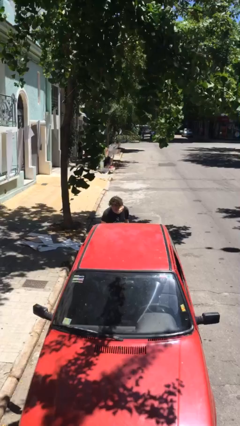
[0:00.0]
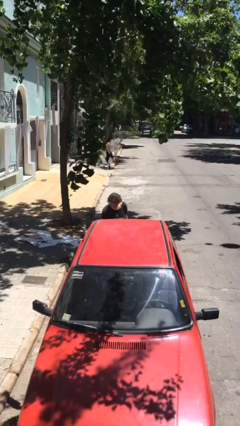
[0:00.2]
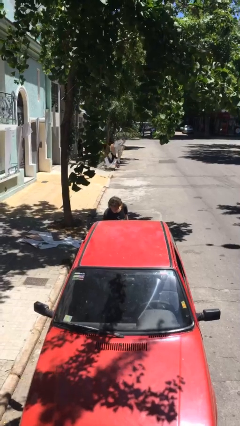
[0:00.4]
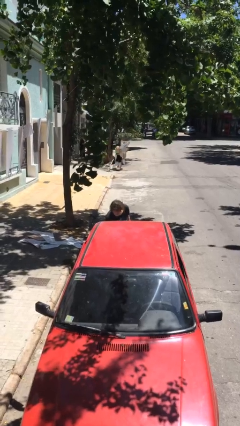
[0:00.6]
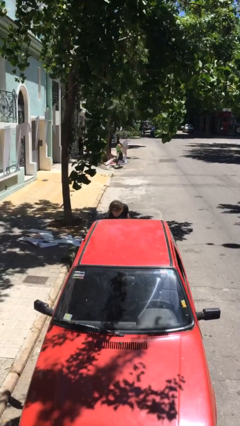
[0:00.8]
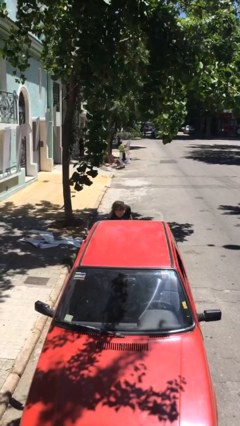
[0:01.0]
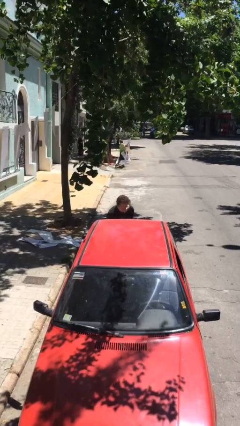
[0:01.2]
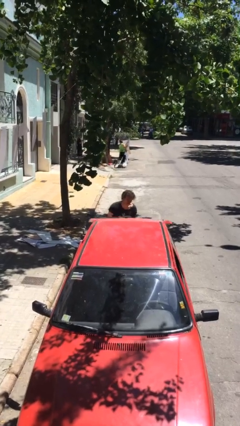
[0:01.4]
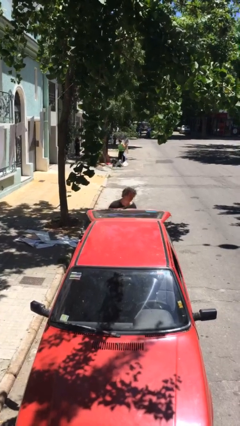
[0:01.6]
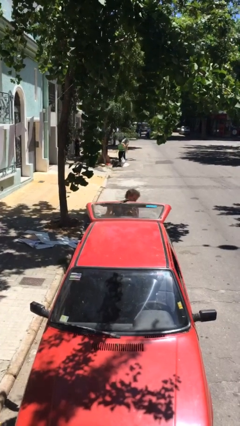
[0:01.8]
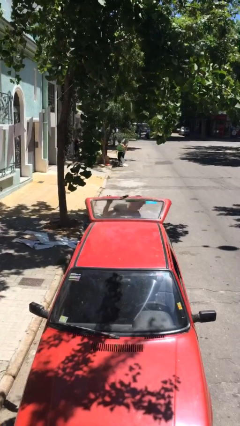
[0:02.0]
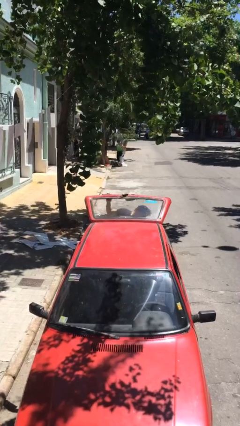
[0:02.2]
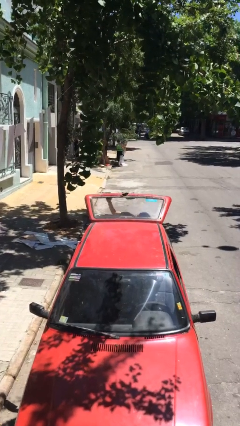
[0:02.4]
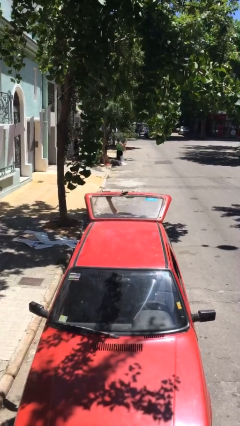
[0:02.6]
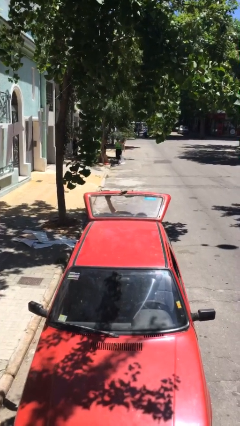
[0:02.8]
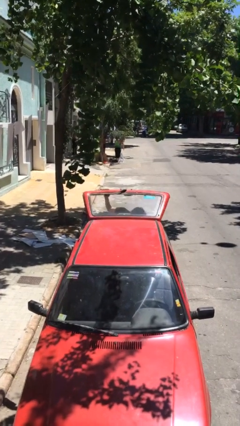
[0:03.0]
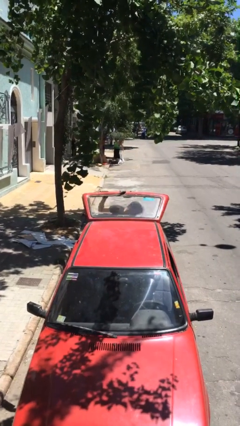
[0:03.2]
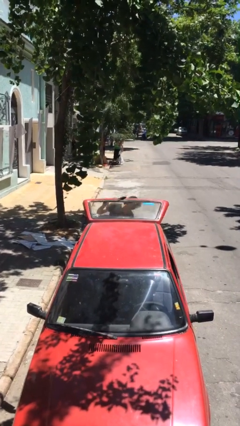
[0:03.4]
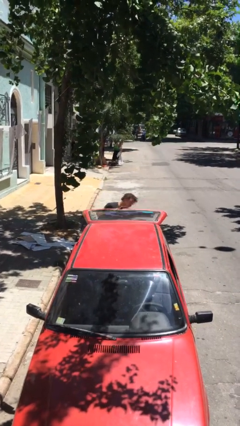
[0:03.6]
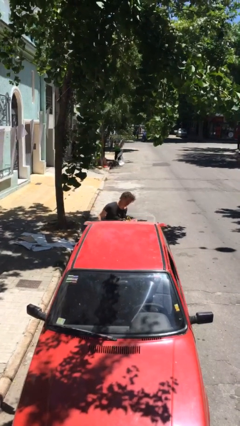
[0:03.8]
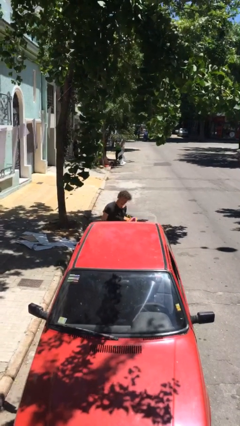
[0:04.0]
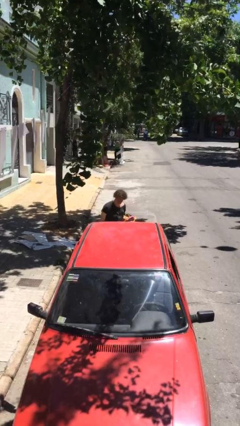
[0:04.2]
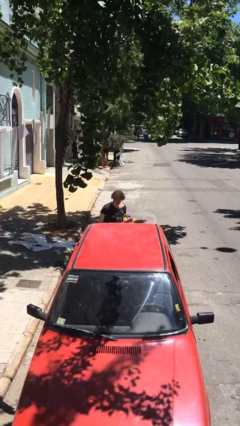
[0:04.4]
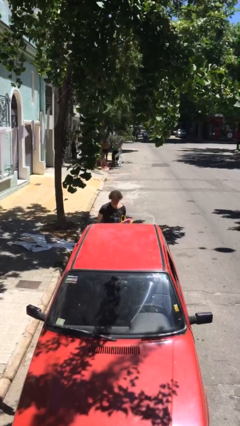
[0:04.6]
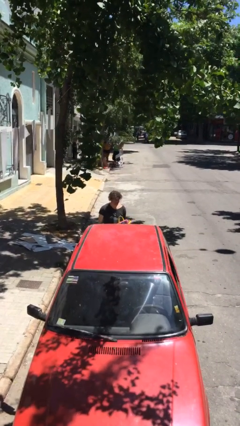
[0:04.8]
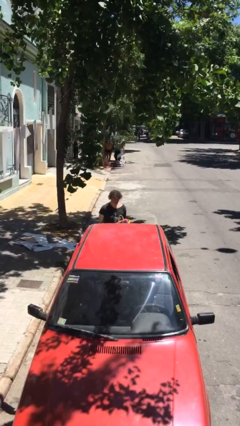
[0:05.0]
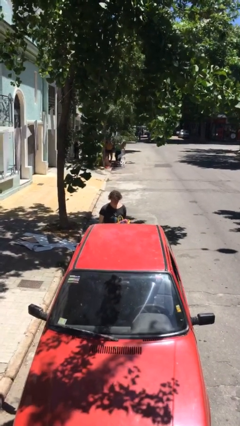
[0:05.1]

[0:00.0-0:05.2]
person unloads car

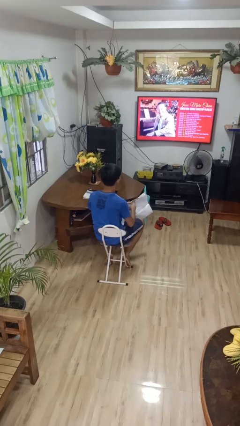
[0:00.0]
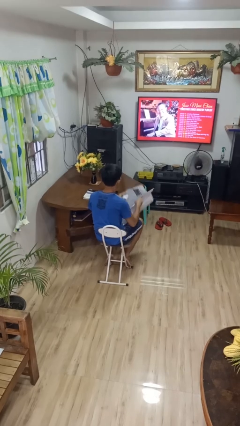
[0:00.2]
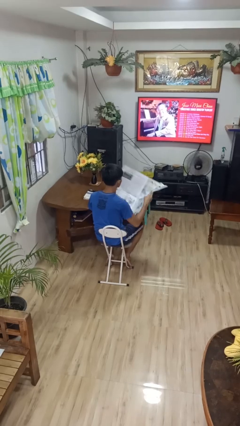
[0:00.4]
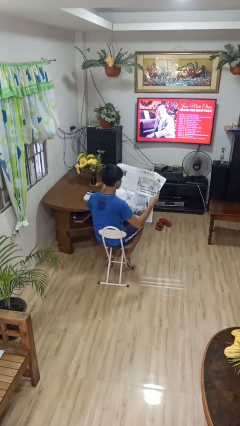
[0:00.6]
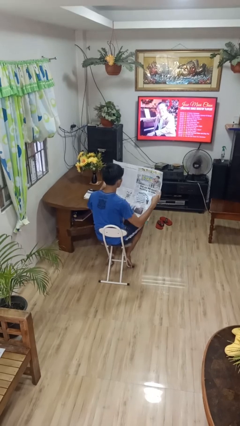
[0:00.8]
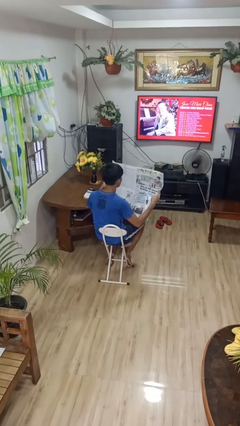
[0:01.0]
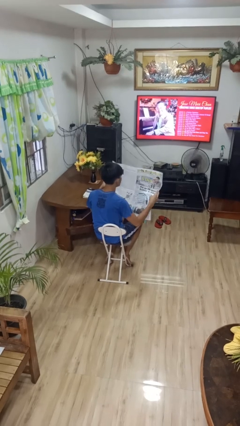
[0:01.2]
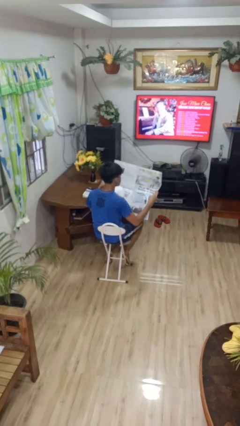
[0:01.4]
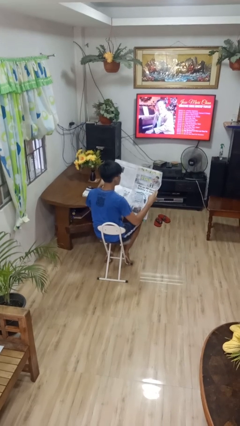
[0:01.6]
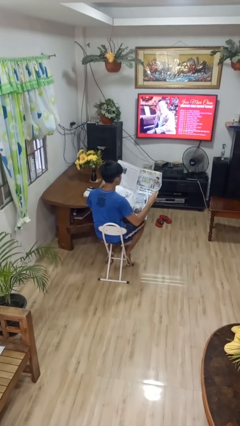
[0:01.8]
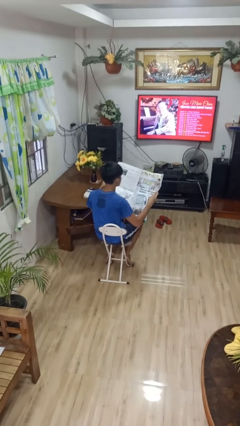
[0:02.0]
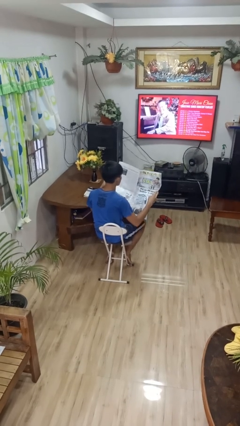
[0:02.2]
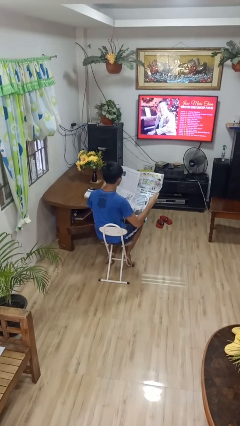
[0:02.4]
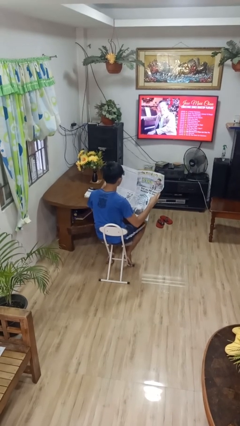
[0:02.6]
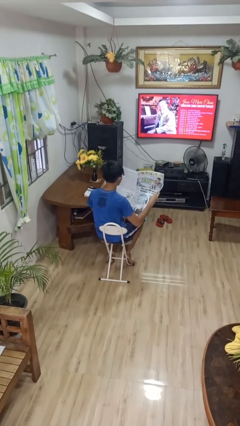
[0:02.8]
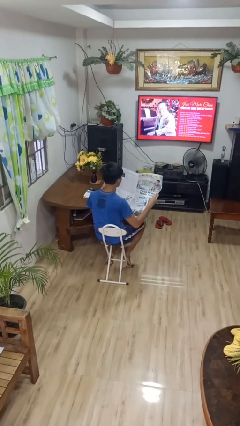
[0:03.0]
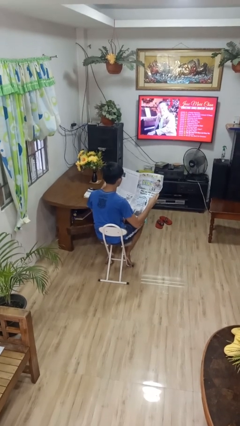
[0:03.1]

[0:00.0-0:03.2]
person reads newspaper

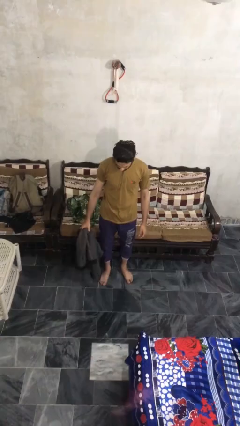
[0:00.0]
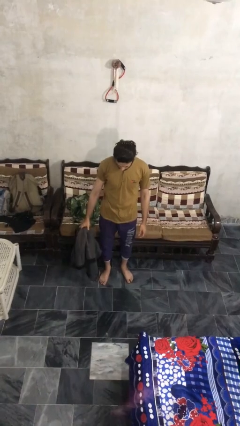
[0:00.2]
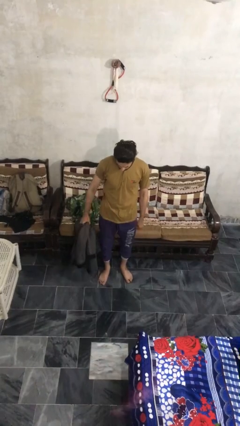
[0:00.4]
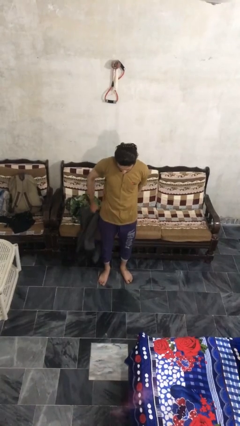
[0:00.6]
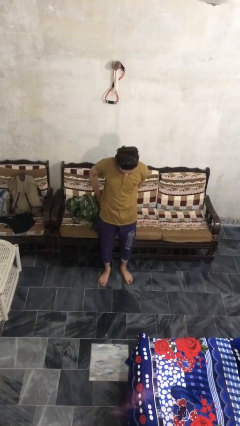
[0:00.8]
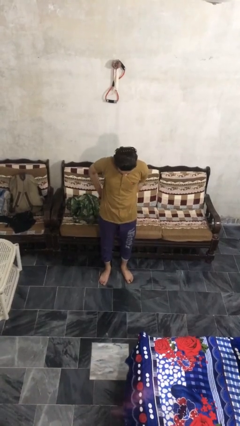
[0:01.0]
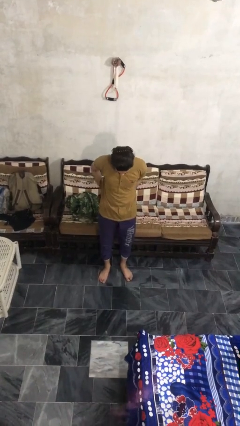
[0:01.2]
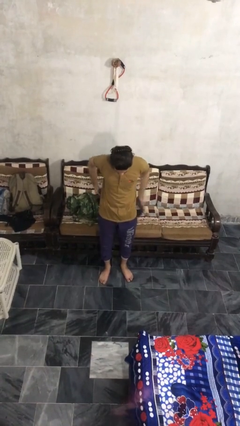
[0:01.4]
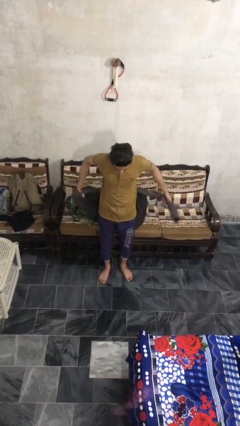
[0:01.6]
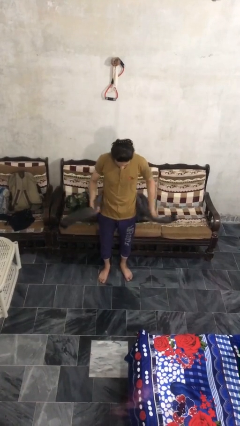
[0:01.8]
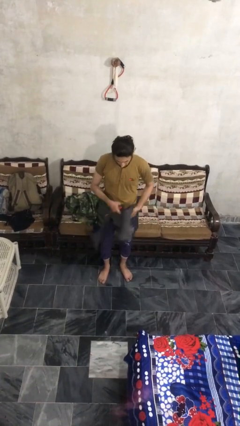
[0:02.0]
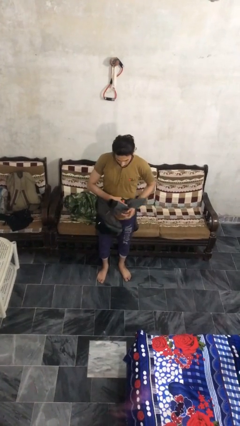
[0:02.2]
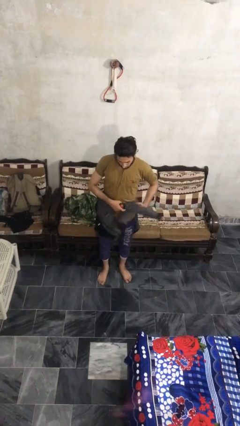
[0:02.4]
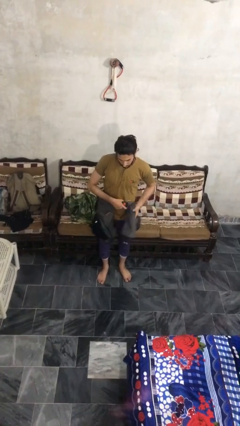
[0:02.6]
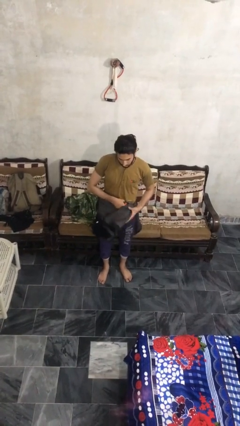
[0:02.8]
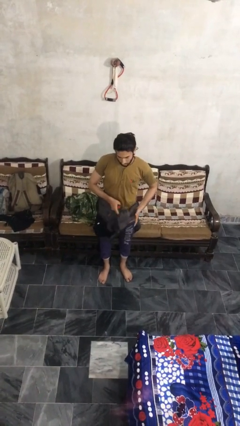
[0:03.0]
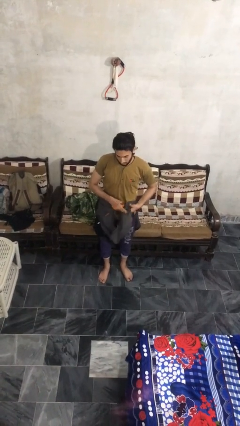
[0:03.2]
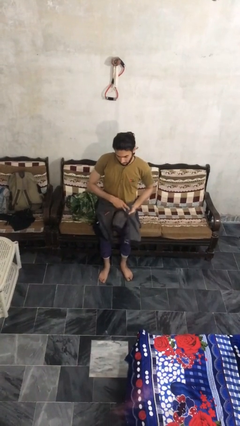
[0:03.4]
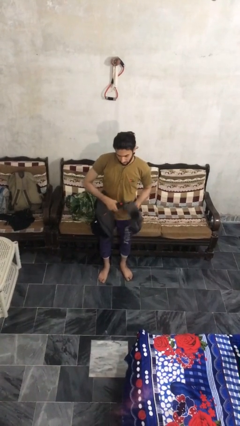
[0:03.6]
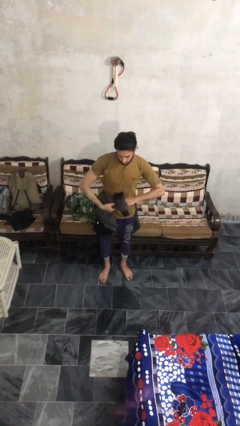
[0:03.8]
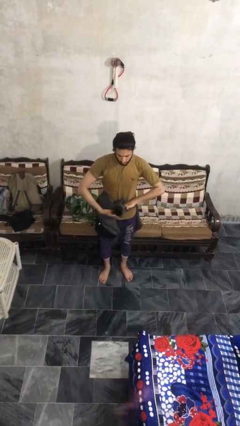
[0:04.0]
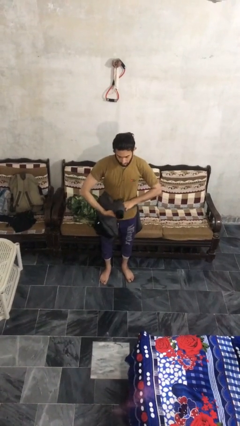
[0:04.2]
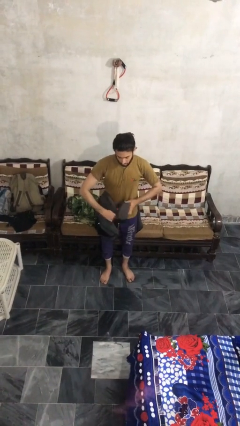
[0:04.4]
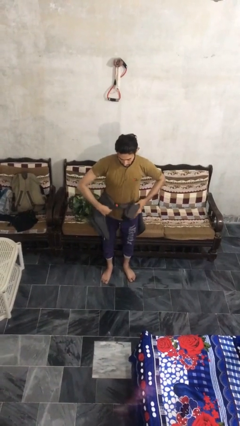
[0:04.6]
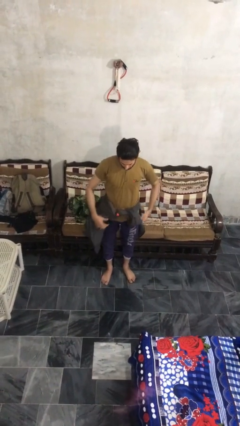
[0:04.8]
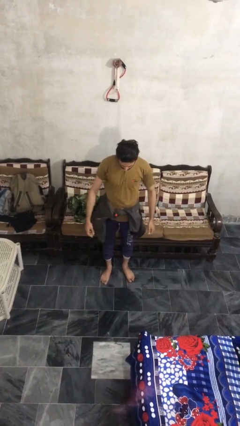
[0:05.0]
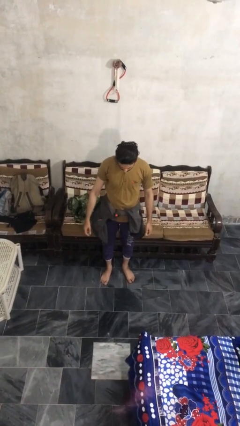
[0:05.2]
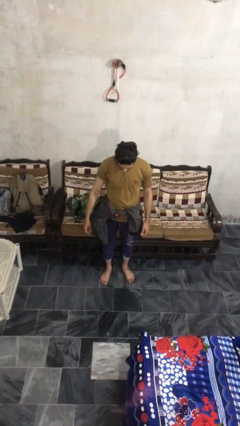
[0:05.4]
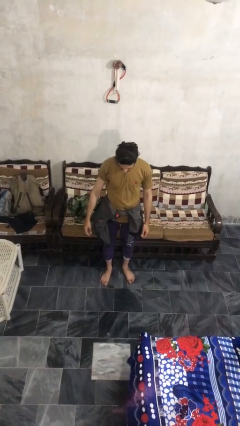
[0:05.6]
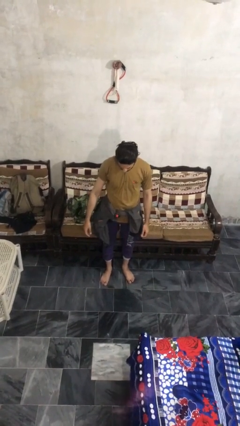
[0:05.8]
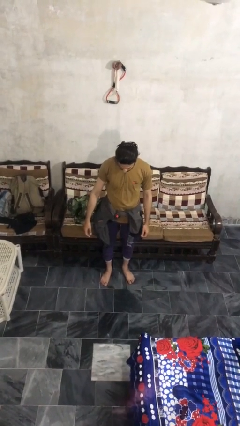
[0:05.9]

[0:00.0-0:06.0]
person ties jacket around waist

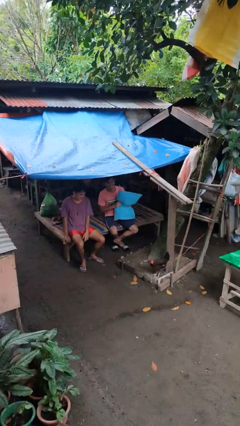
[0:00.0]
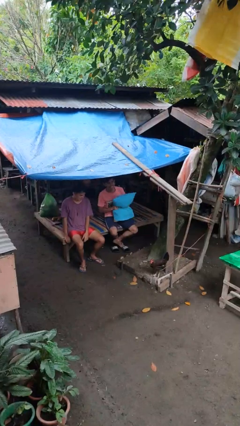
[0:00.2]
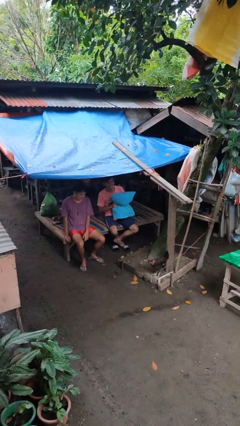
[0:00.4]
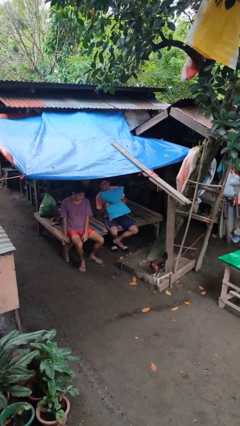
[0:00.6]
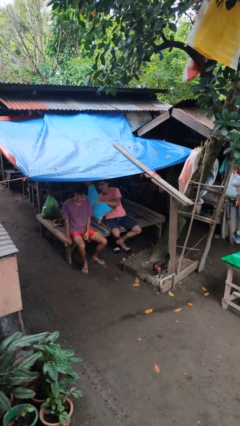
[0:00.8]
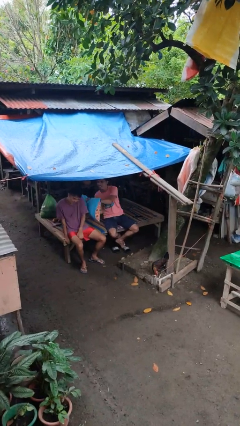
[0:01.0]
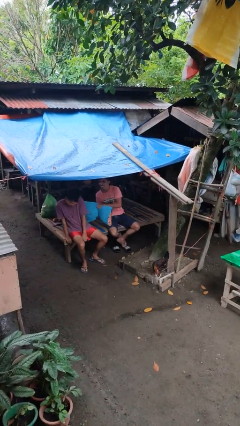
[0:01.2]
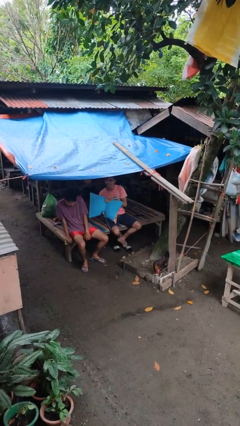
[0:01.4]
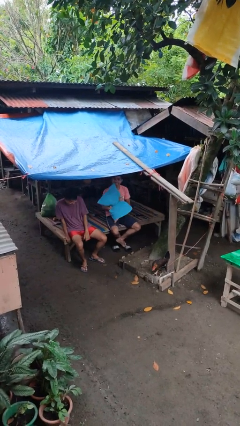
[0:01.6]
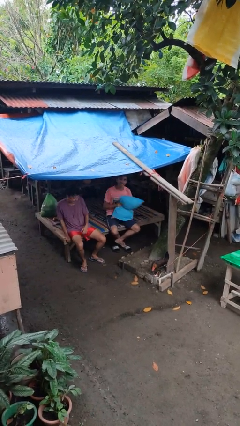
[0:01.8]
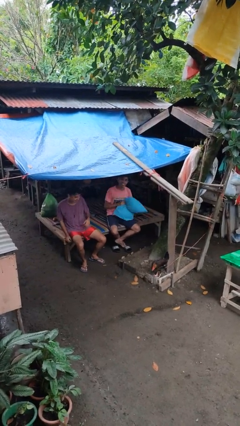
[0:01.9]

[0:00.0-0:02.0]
person hits person with pillow

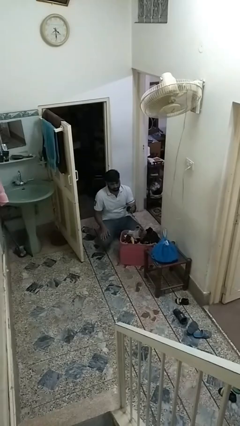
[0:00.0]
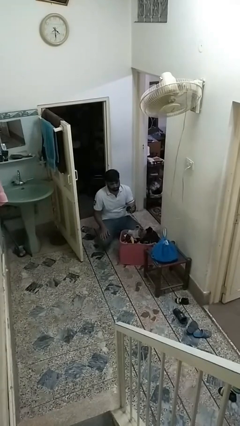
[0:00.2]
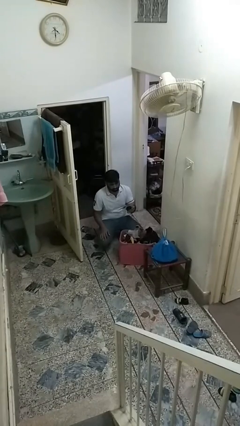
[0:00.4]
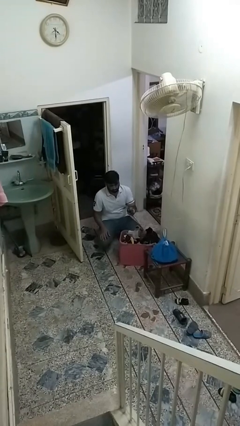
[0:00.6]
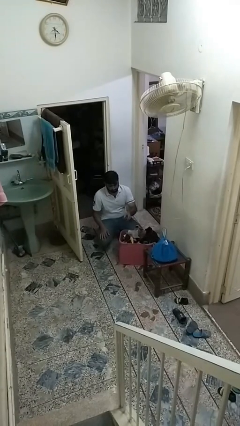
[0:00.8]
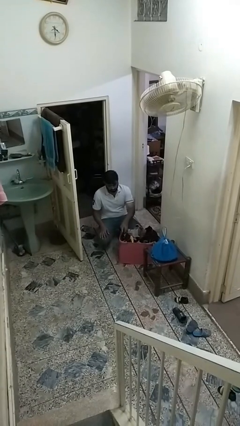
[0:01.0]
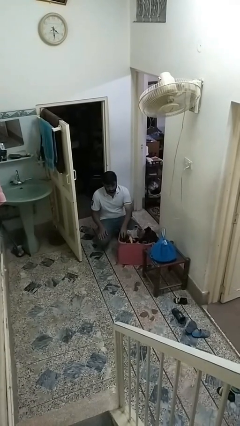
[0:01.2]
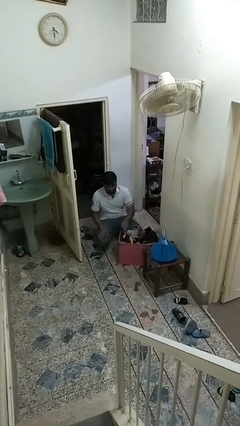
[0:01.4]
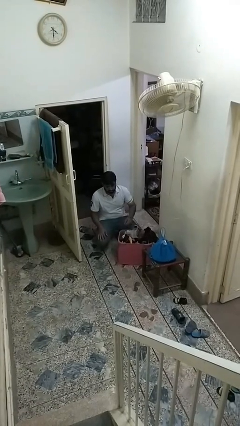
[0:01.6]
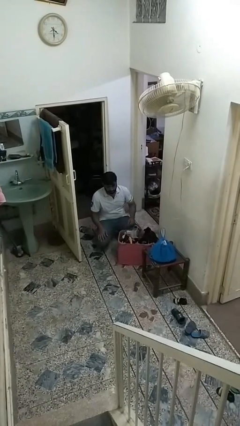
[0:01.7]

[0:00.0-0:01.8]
person puts object into basket
